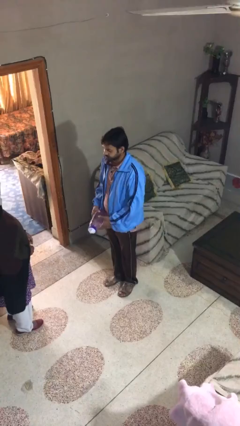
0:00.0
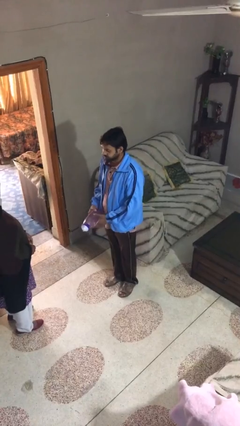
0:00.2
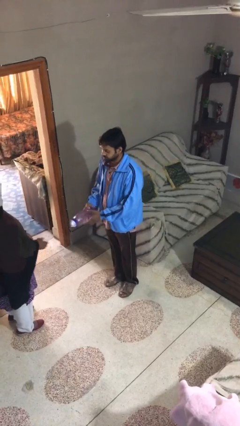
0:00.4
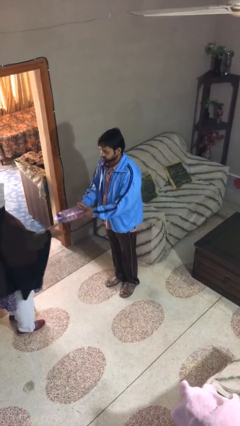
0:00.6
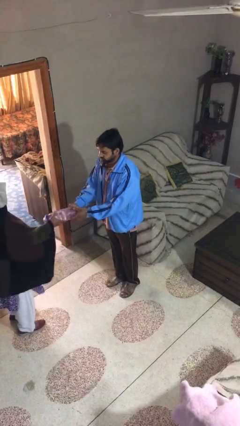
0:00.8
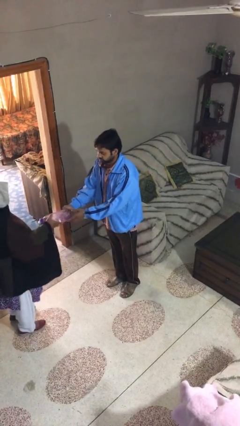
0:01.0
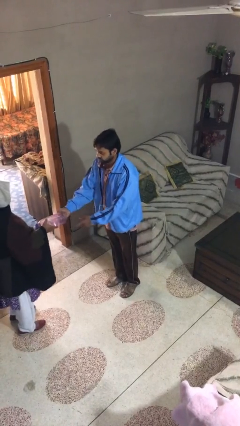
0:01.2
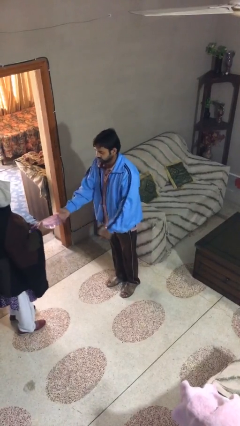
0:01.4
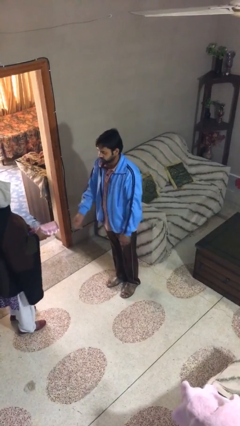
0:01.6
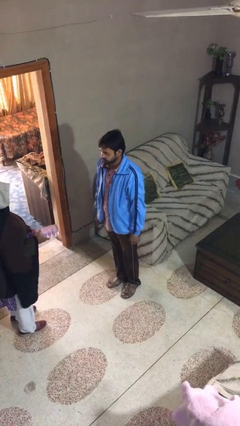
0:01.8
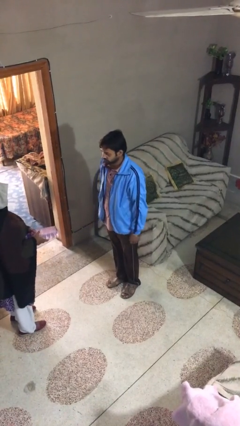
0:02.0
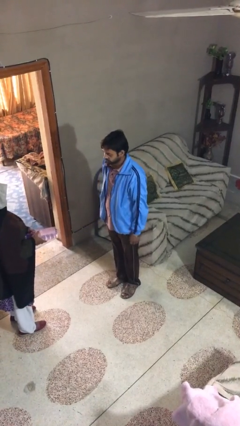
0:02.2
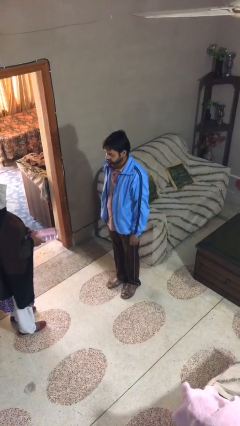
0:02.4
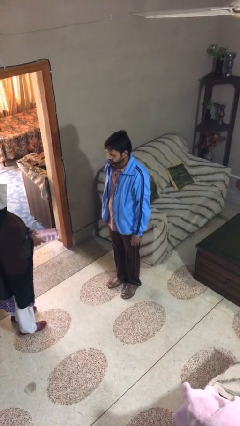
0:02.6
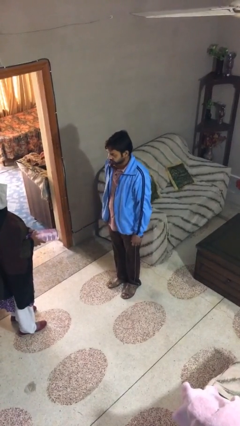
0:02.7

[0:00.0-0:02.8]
person transfers object to person

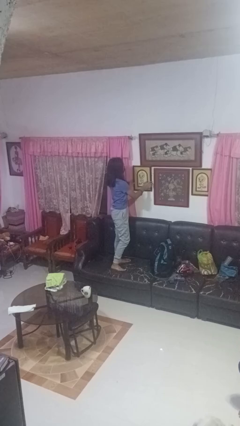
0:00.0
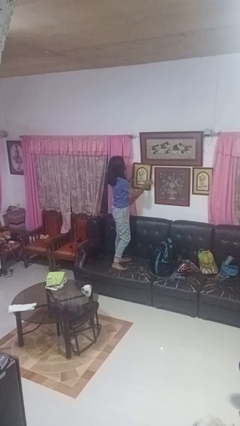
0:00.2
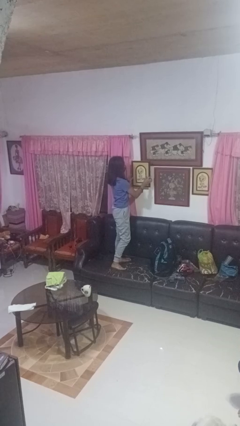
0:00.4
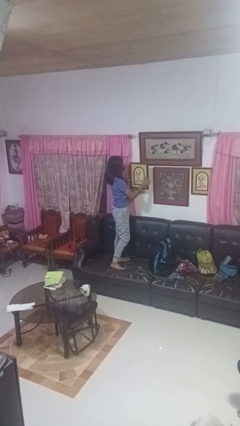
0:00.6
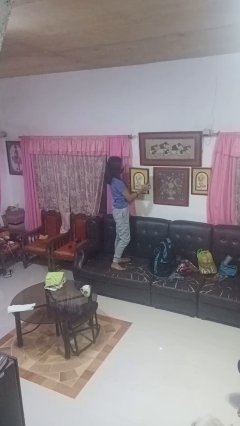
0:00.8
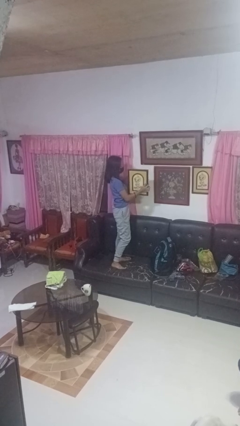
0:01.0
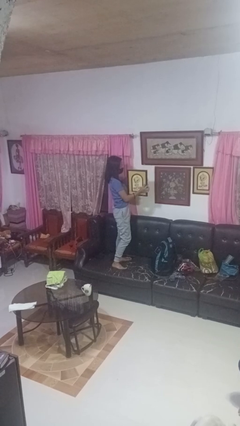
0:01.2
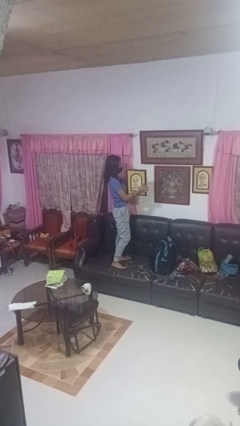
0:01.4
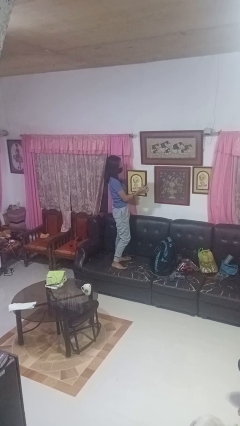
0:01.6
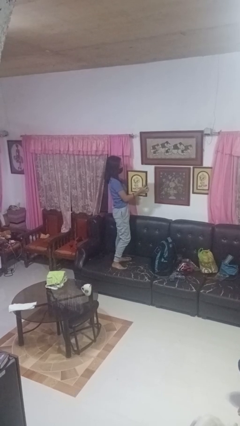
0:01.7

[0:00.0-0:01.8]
person takes down picture frame

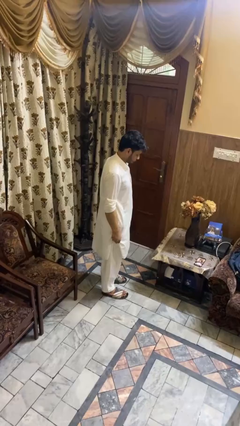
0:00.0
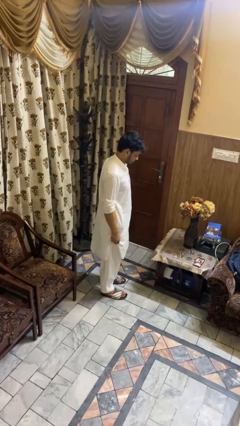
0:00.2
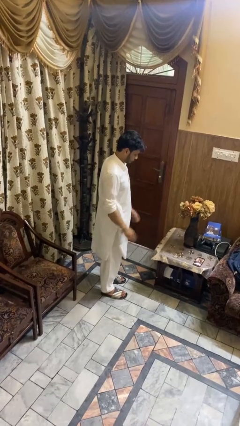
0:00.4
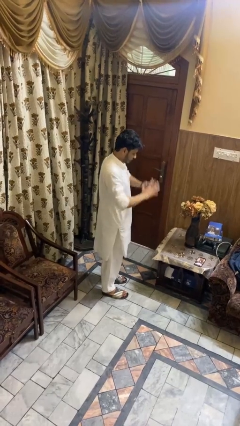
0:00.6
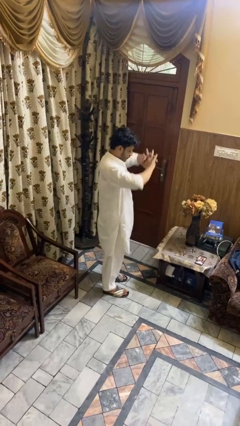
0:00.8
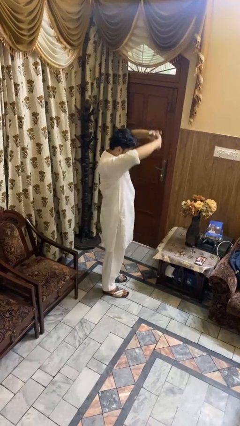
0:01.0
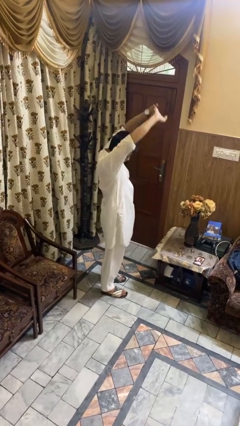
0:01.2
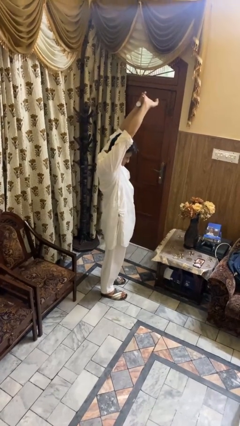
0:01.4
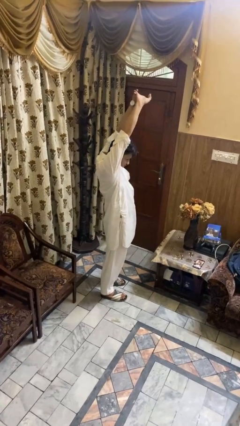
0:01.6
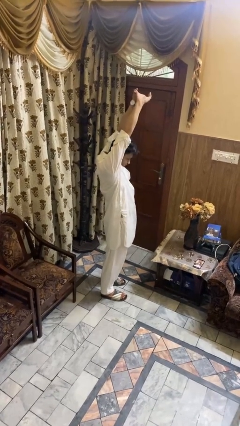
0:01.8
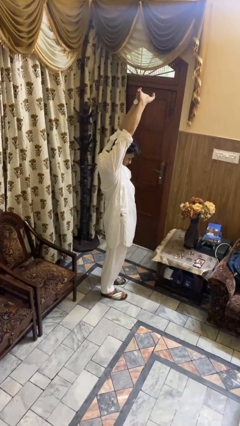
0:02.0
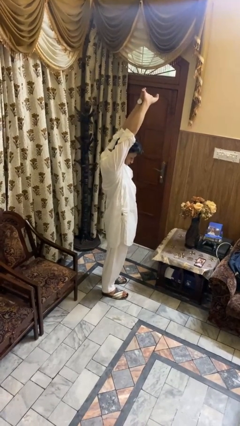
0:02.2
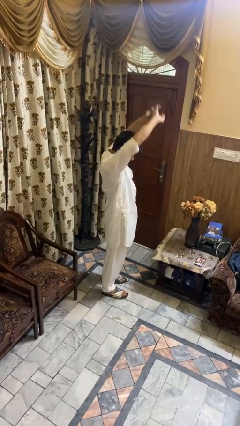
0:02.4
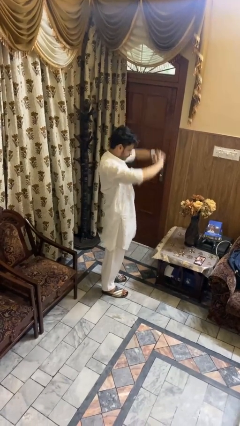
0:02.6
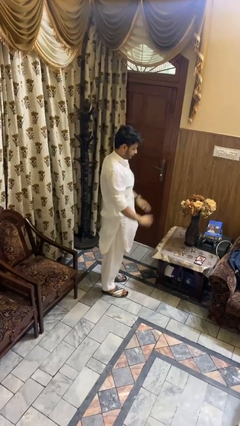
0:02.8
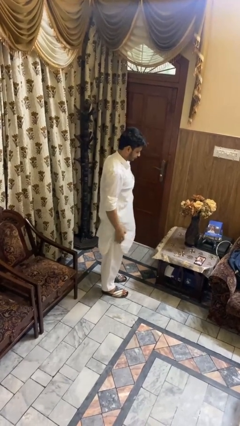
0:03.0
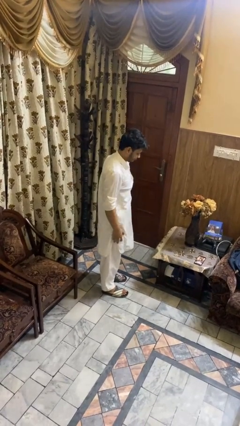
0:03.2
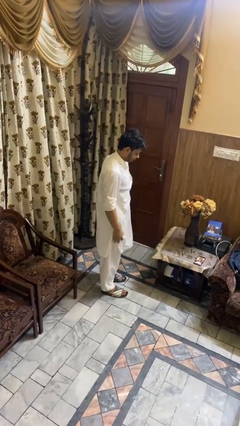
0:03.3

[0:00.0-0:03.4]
person stretches arms over head

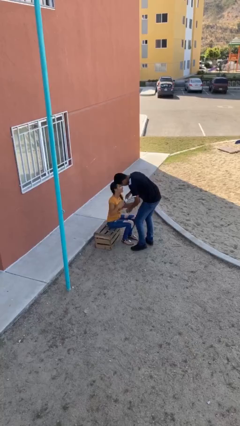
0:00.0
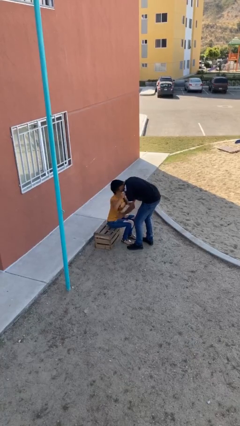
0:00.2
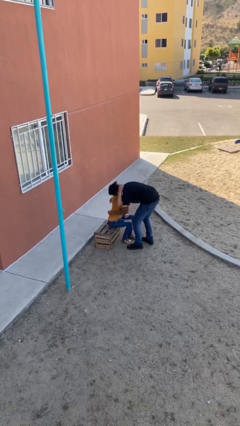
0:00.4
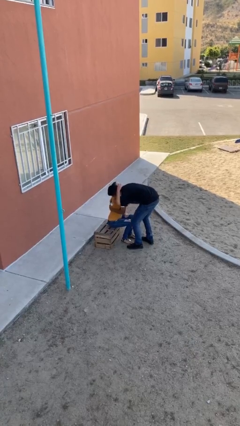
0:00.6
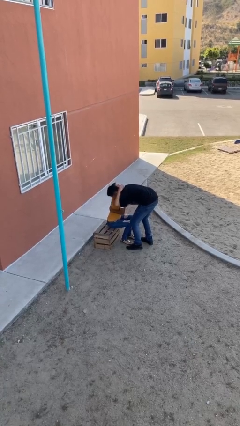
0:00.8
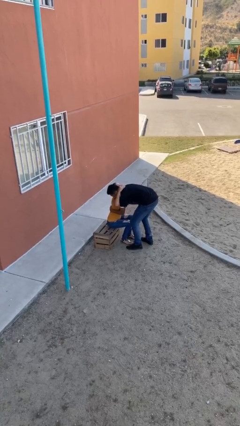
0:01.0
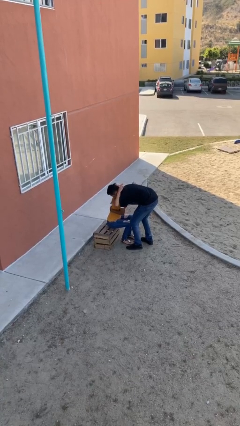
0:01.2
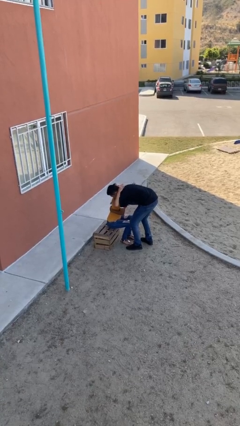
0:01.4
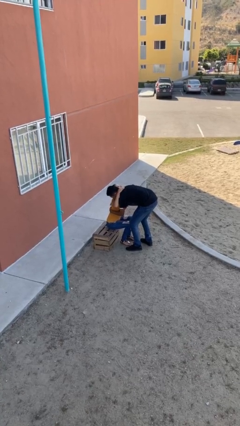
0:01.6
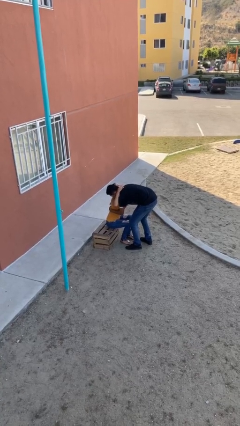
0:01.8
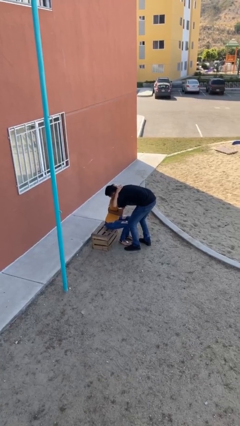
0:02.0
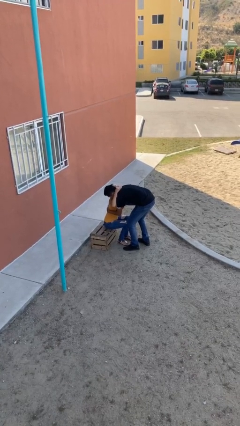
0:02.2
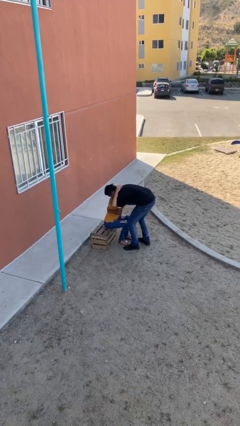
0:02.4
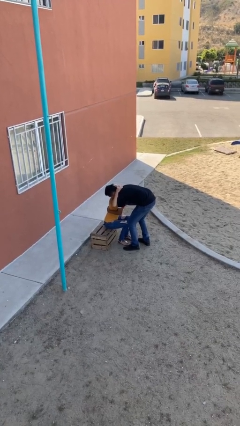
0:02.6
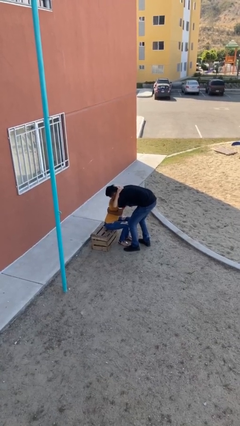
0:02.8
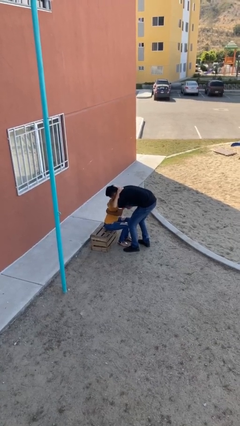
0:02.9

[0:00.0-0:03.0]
person embraces person

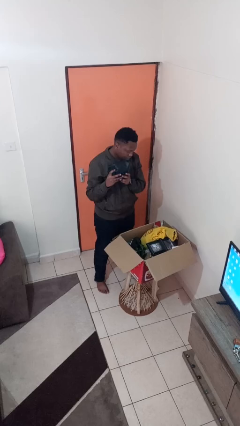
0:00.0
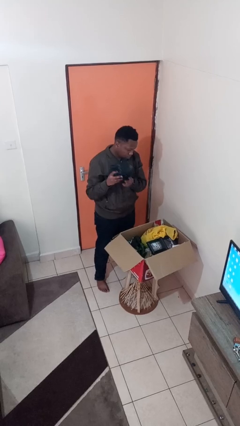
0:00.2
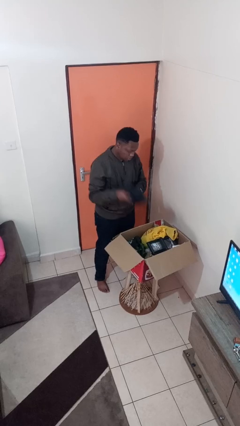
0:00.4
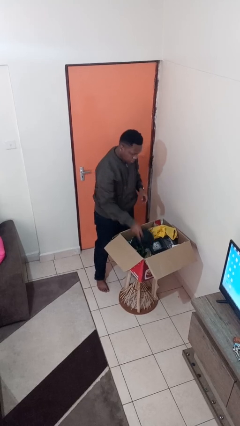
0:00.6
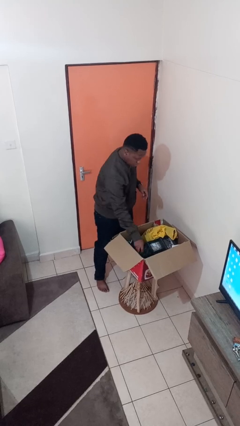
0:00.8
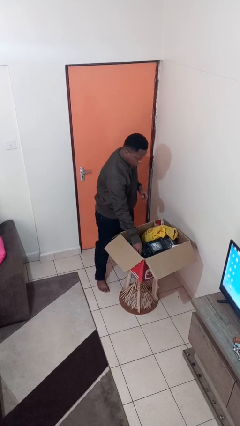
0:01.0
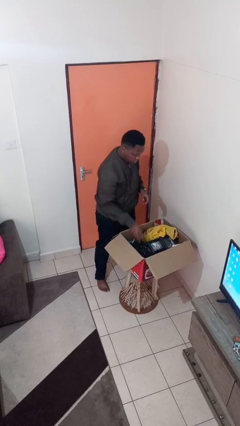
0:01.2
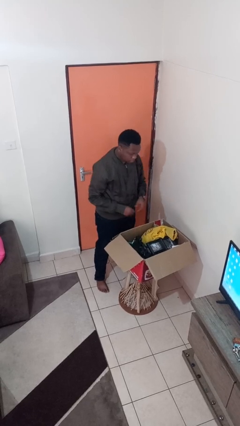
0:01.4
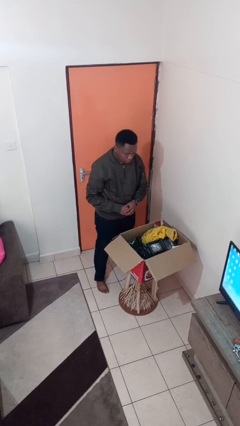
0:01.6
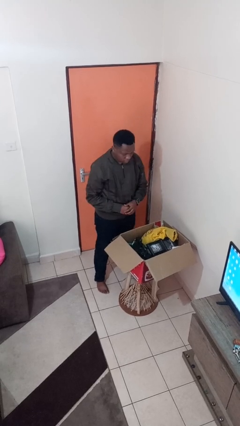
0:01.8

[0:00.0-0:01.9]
person puts object into box

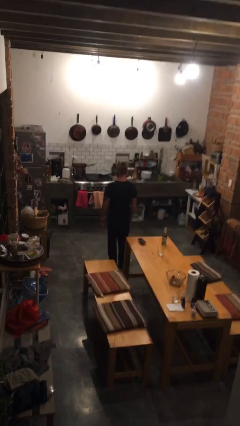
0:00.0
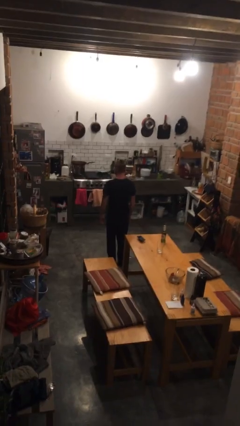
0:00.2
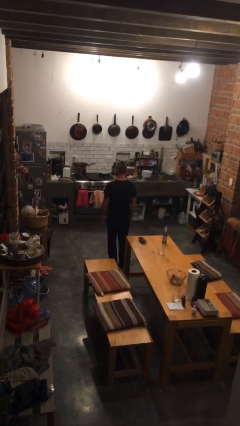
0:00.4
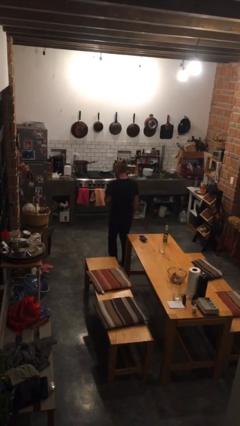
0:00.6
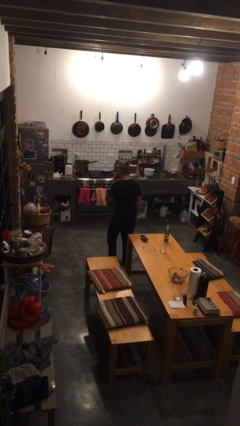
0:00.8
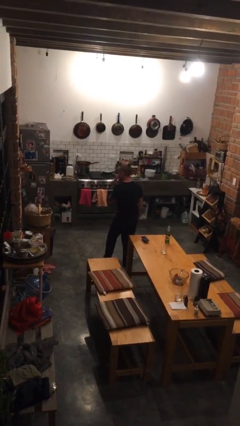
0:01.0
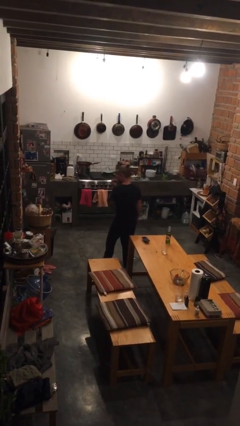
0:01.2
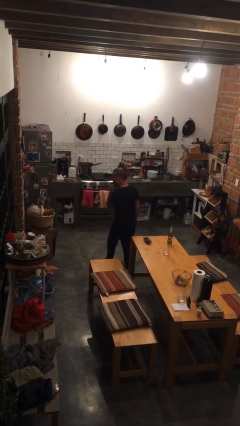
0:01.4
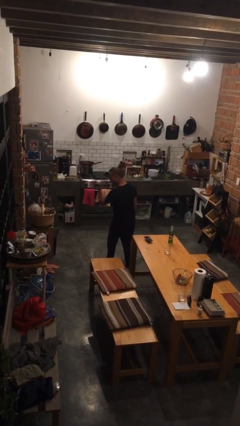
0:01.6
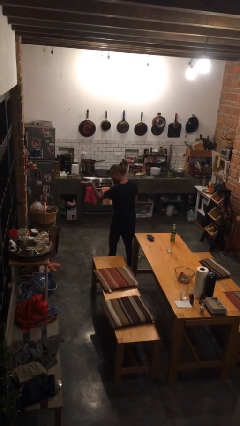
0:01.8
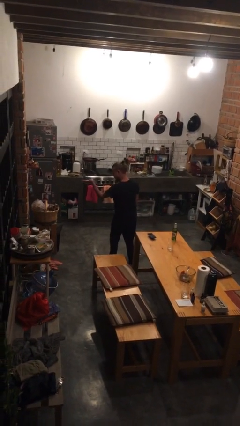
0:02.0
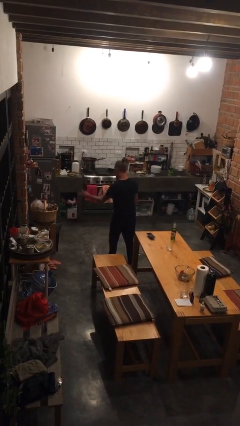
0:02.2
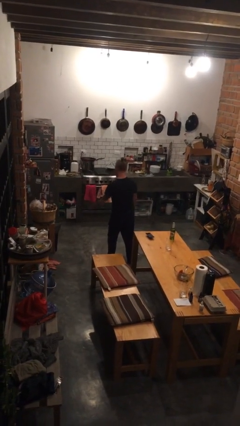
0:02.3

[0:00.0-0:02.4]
person gestures blow kiss

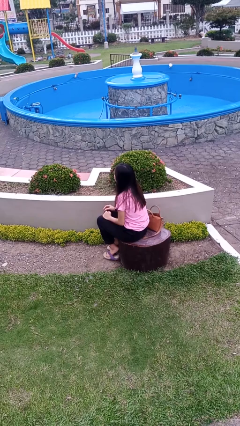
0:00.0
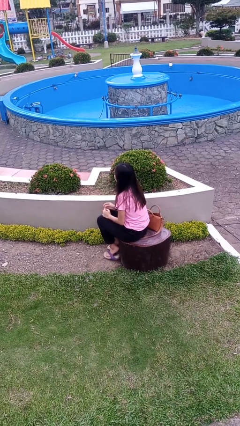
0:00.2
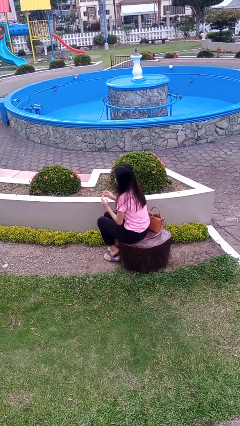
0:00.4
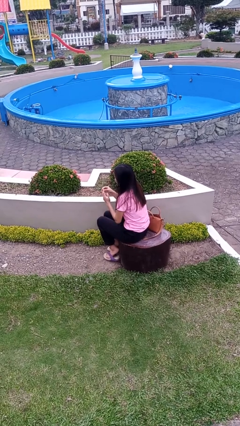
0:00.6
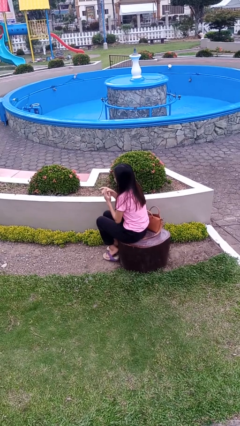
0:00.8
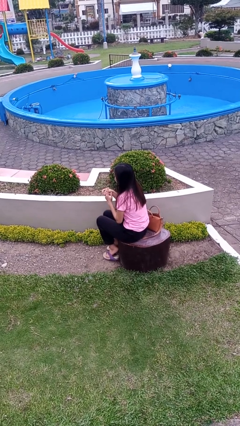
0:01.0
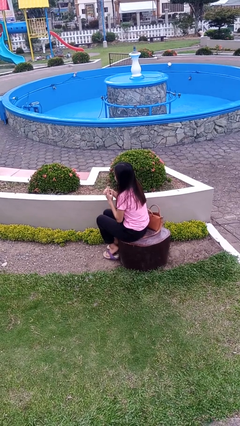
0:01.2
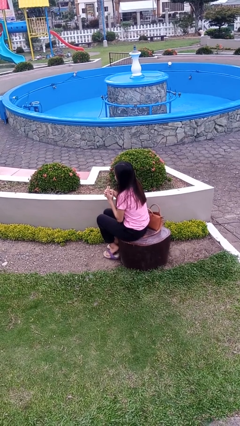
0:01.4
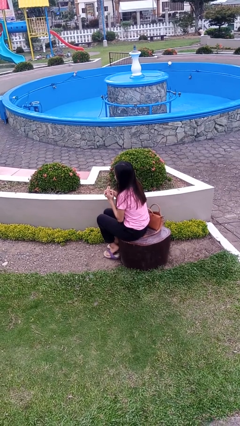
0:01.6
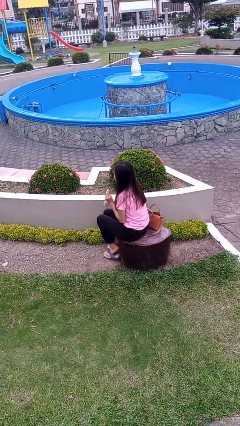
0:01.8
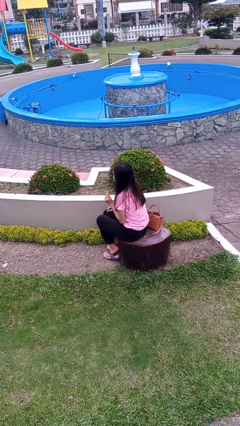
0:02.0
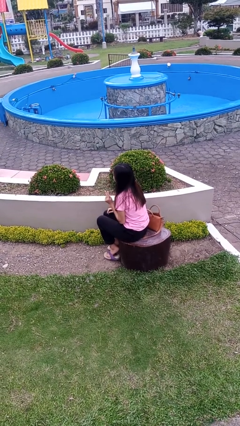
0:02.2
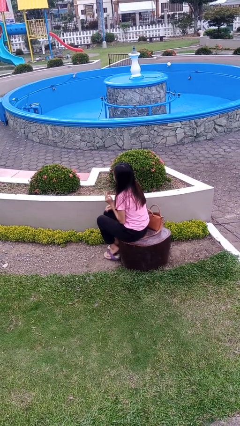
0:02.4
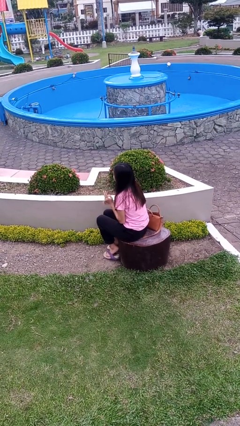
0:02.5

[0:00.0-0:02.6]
person puts on ring
